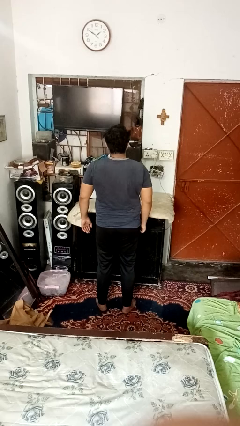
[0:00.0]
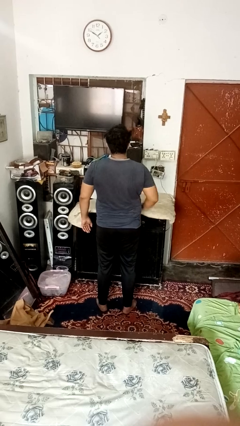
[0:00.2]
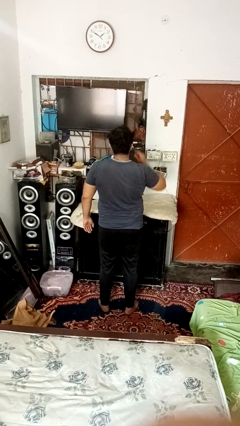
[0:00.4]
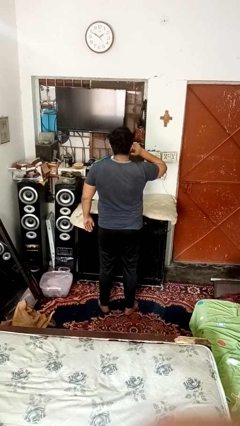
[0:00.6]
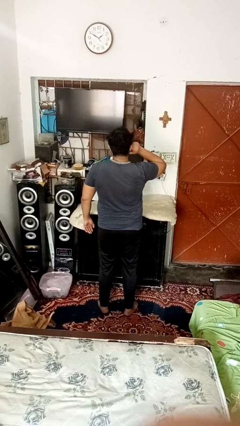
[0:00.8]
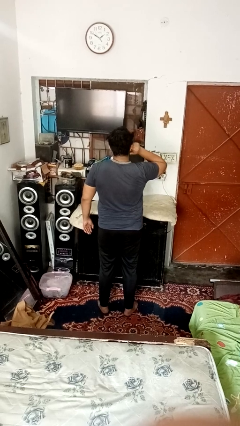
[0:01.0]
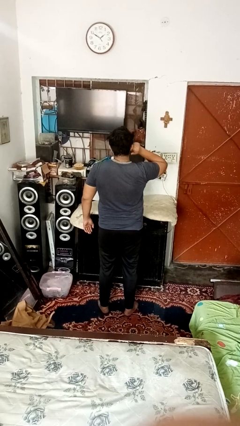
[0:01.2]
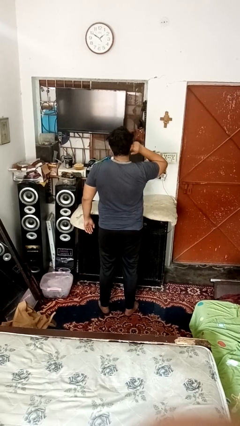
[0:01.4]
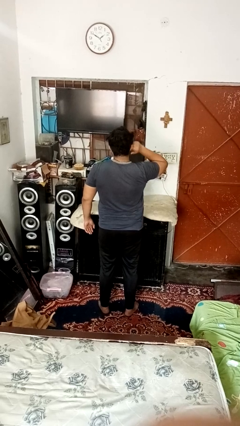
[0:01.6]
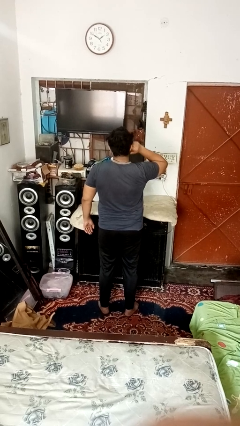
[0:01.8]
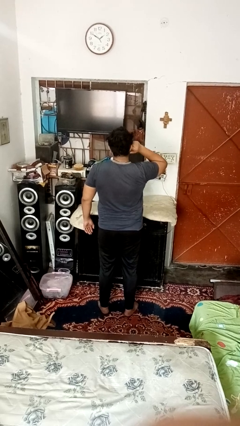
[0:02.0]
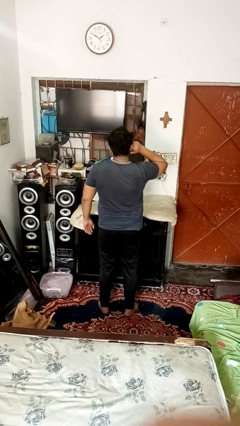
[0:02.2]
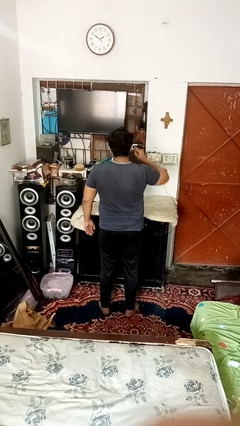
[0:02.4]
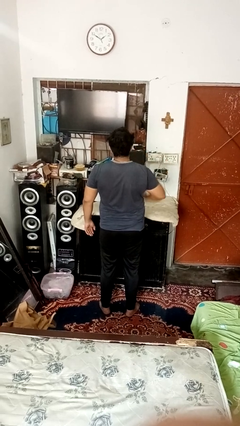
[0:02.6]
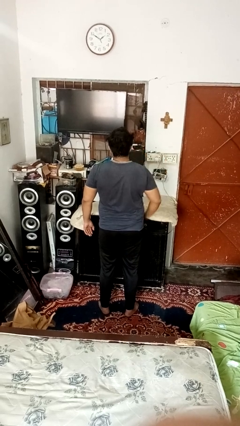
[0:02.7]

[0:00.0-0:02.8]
person puts fingers in ear

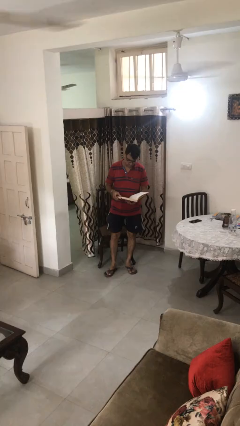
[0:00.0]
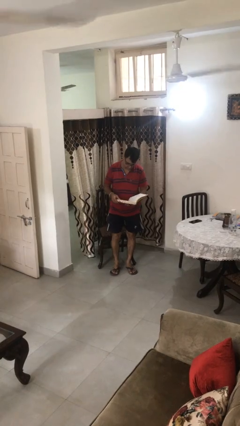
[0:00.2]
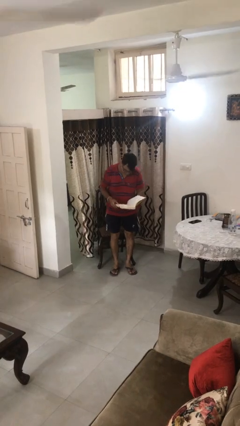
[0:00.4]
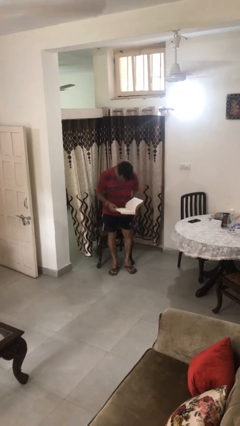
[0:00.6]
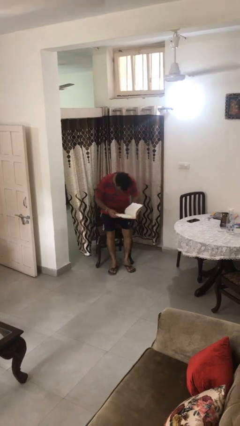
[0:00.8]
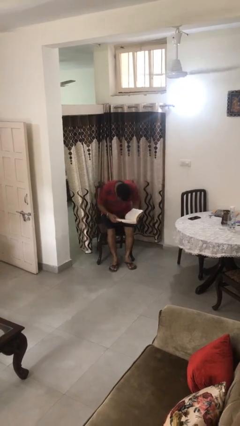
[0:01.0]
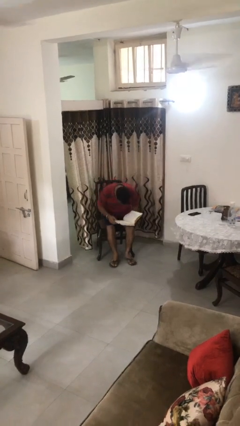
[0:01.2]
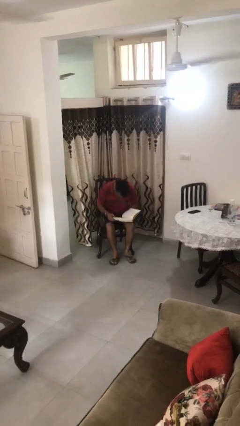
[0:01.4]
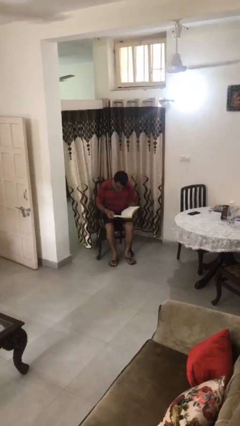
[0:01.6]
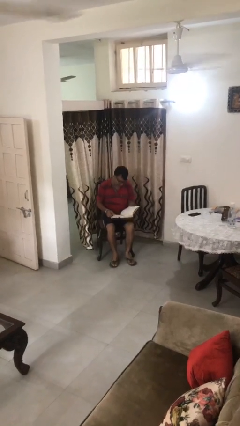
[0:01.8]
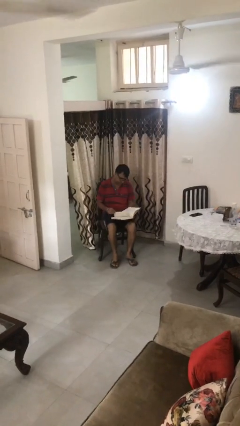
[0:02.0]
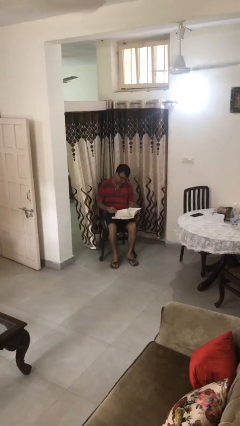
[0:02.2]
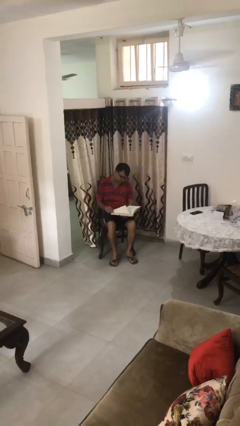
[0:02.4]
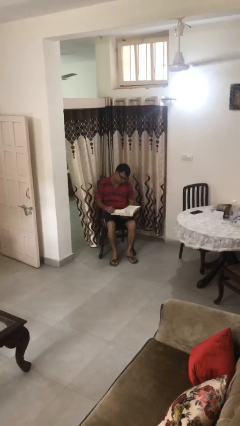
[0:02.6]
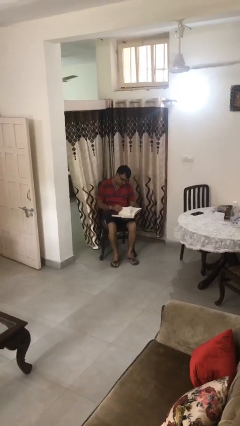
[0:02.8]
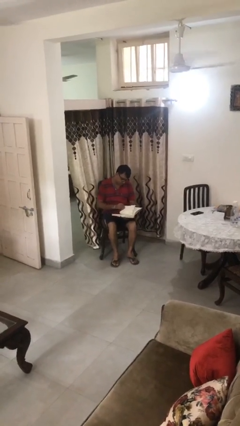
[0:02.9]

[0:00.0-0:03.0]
person sits down

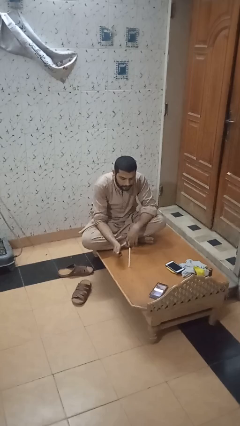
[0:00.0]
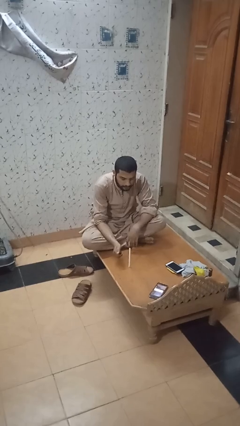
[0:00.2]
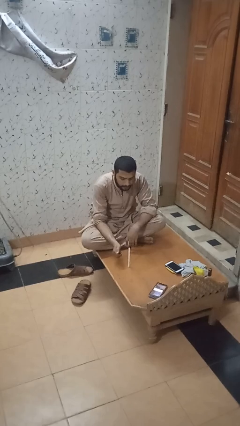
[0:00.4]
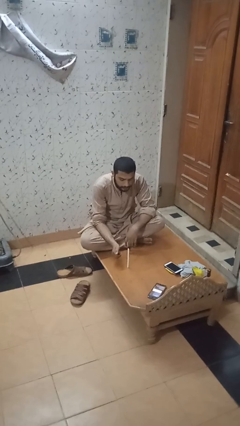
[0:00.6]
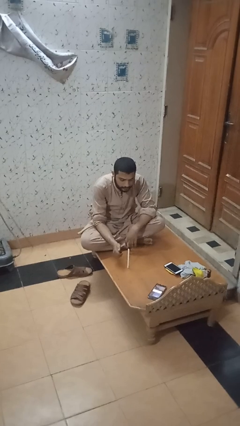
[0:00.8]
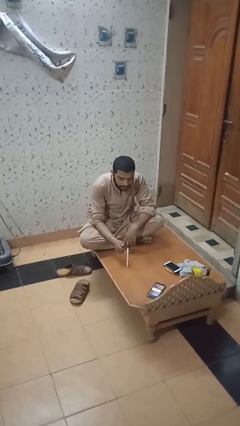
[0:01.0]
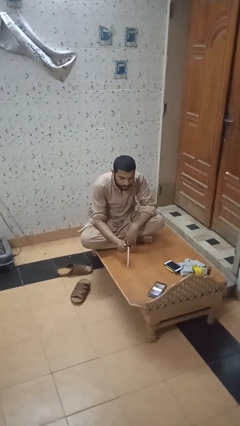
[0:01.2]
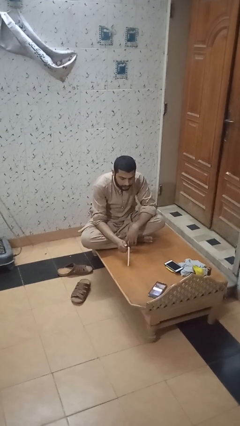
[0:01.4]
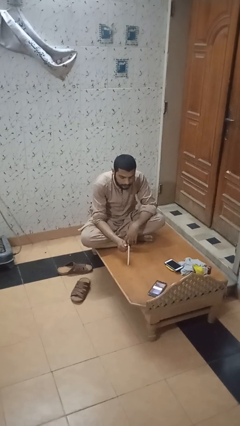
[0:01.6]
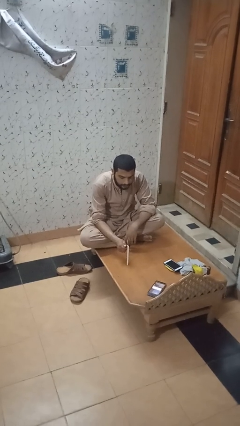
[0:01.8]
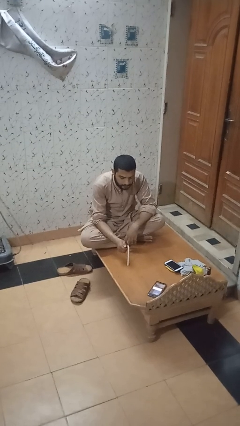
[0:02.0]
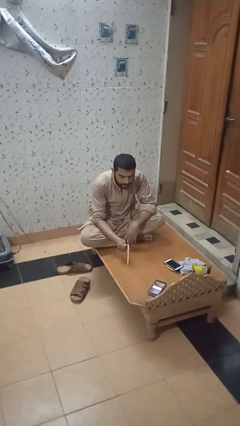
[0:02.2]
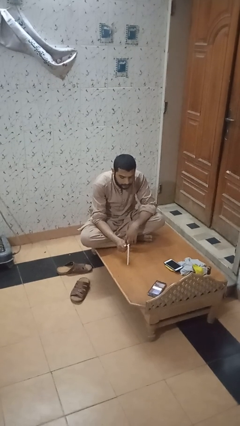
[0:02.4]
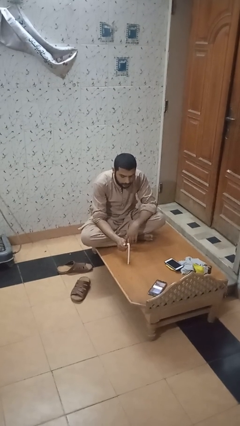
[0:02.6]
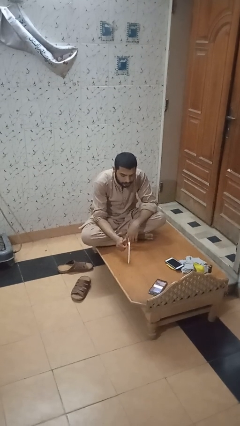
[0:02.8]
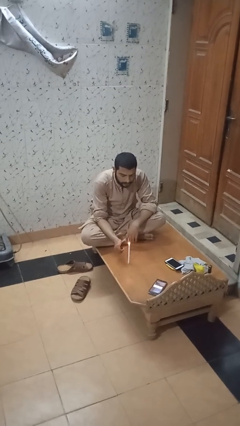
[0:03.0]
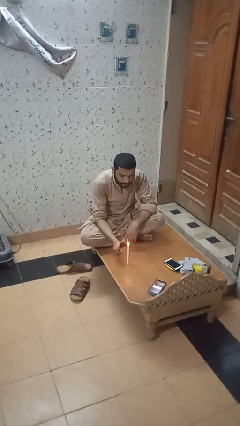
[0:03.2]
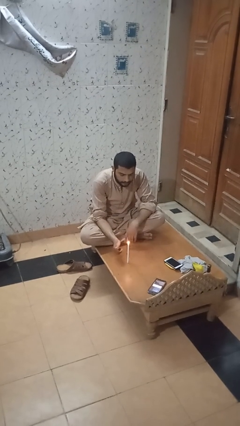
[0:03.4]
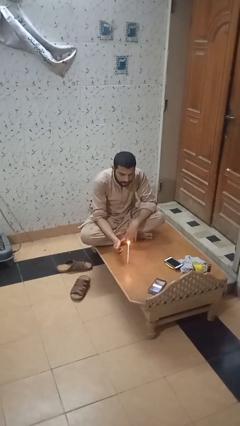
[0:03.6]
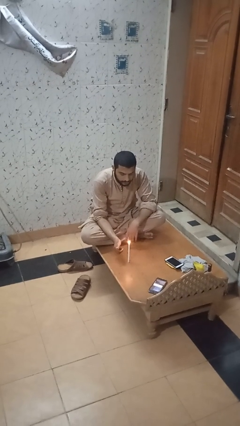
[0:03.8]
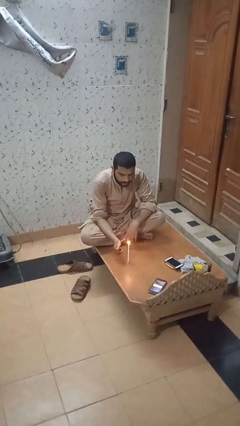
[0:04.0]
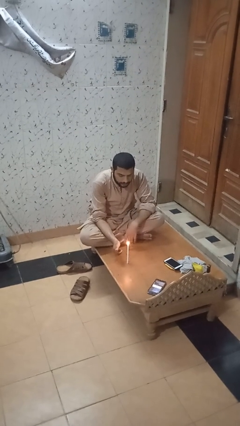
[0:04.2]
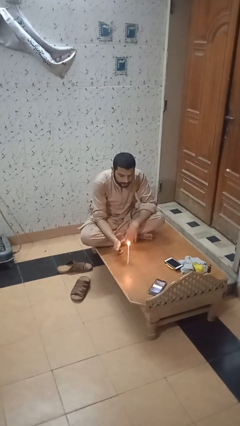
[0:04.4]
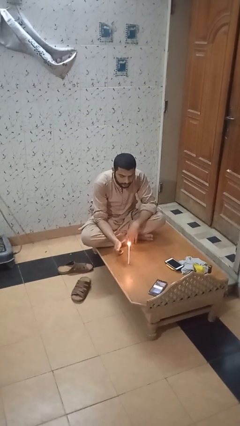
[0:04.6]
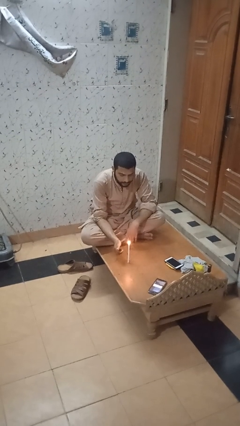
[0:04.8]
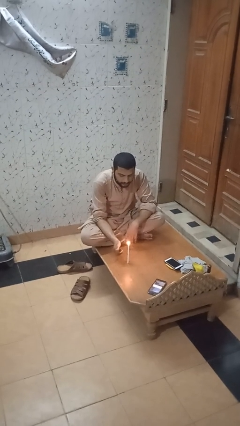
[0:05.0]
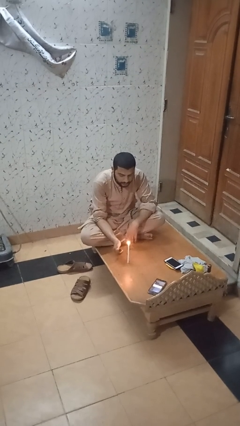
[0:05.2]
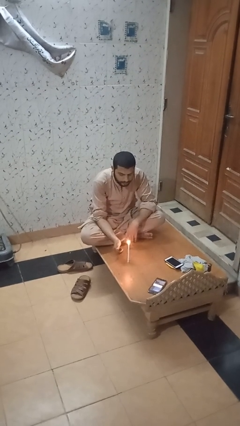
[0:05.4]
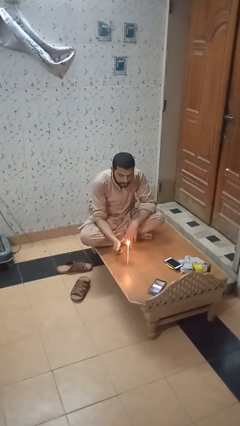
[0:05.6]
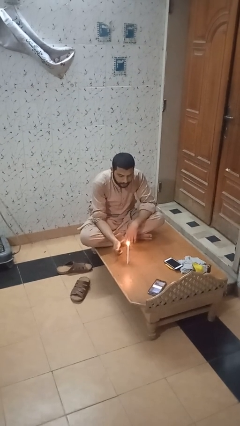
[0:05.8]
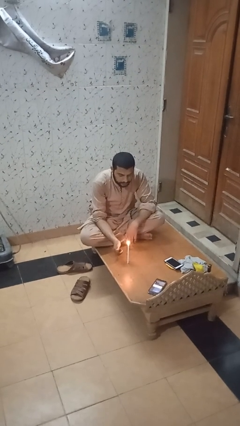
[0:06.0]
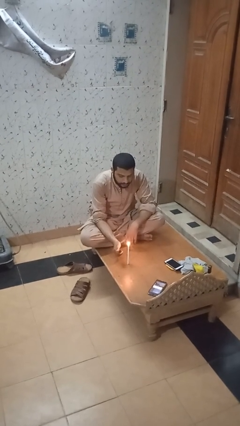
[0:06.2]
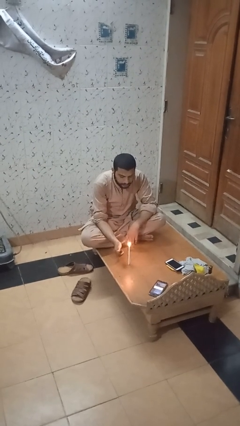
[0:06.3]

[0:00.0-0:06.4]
person lights candle

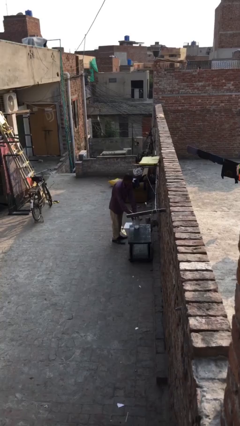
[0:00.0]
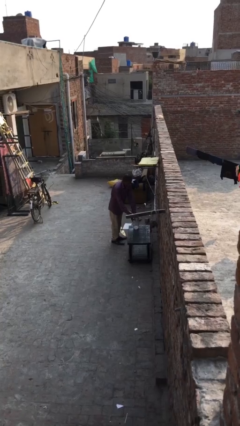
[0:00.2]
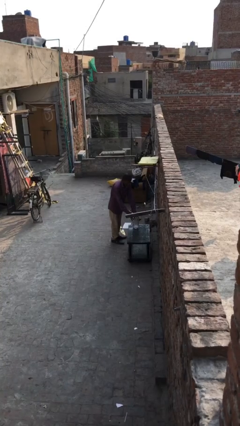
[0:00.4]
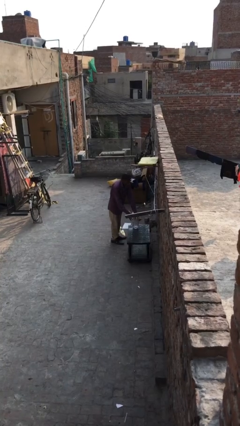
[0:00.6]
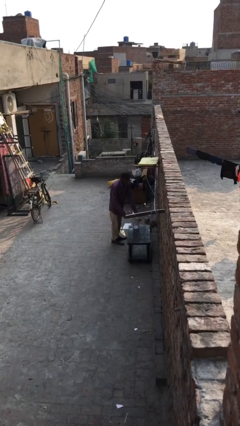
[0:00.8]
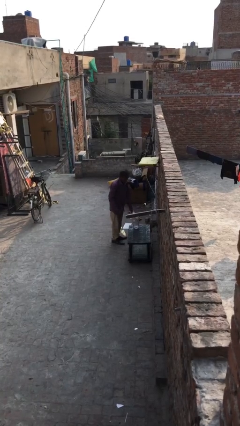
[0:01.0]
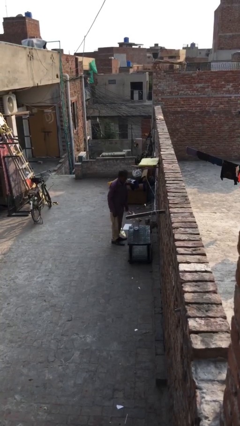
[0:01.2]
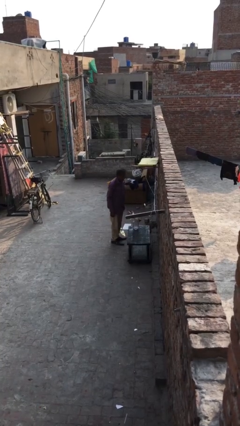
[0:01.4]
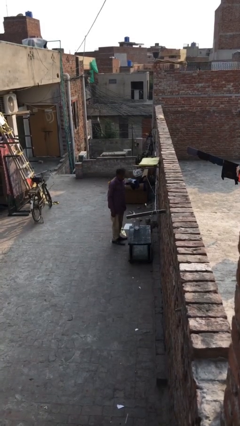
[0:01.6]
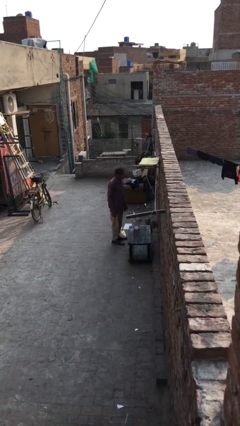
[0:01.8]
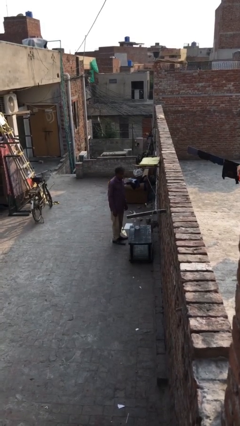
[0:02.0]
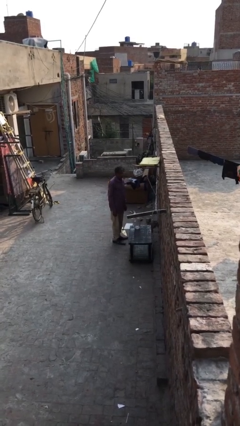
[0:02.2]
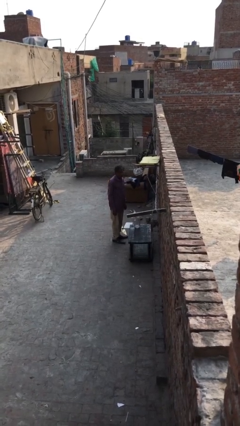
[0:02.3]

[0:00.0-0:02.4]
person puts down object on table

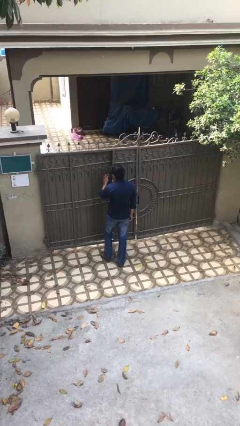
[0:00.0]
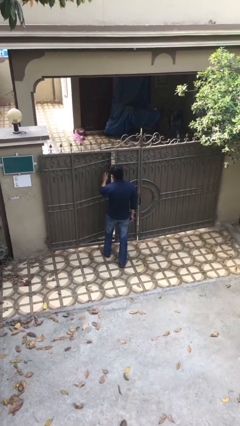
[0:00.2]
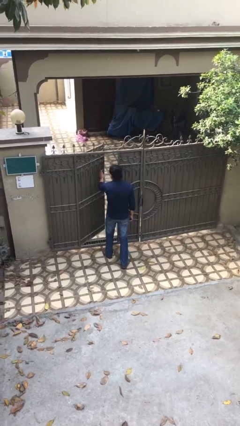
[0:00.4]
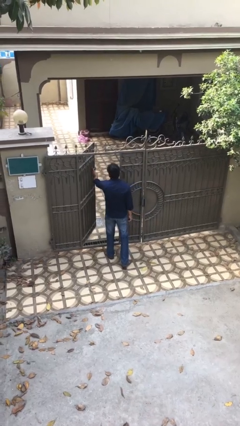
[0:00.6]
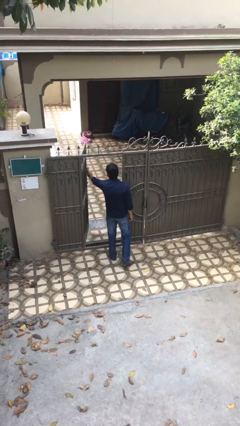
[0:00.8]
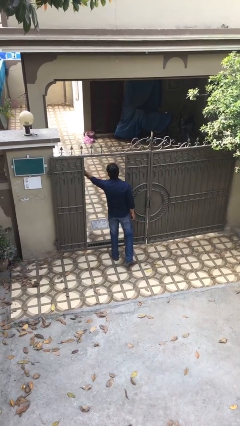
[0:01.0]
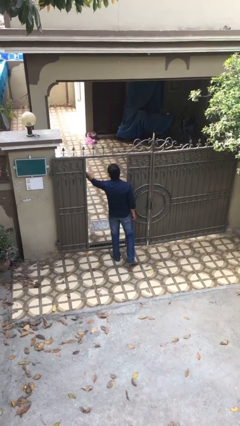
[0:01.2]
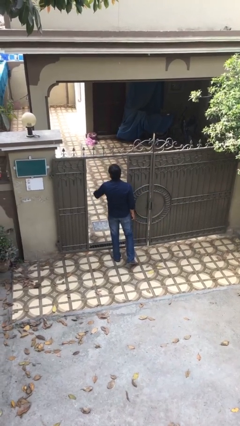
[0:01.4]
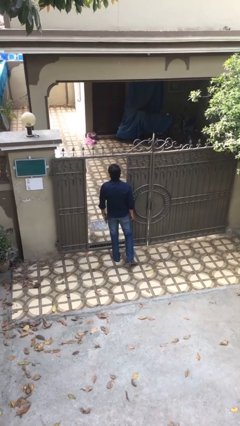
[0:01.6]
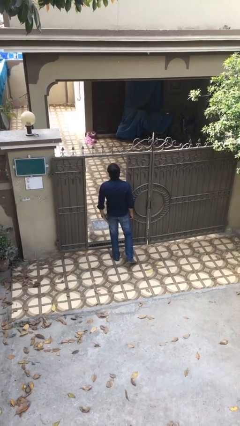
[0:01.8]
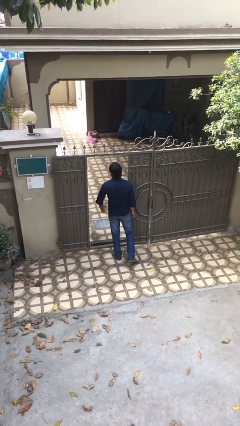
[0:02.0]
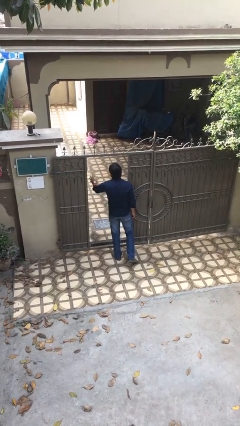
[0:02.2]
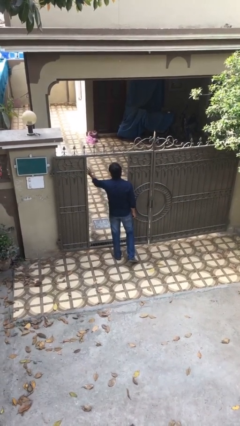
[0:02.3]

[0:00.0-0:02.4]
person opens facility door
